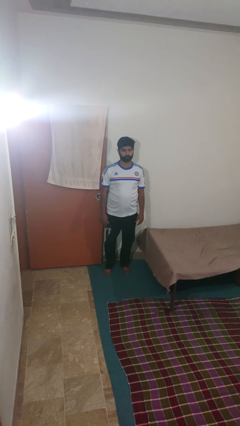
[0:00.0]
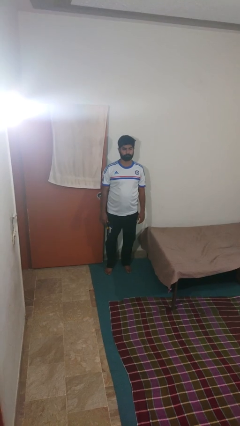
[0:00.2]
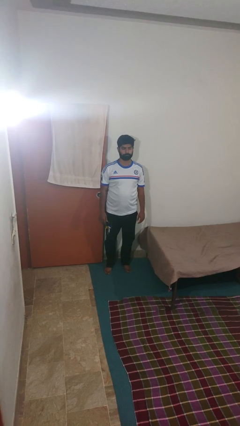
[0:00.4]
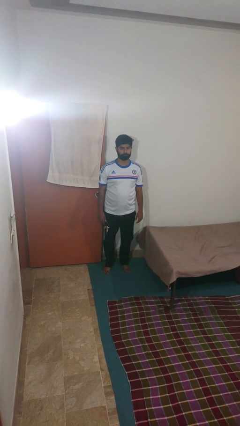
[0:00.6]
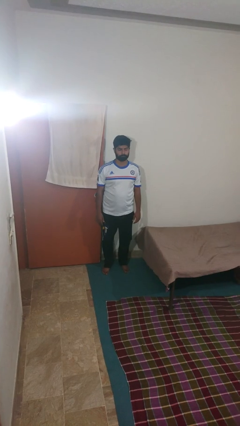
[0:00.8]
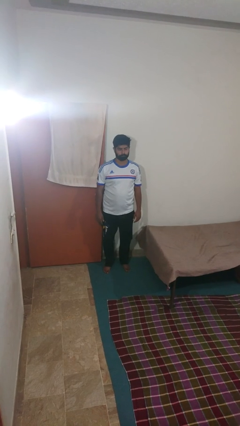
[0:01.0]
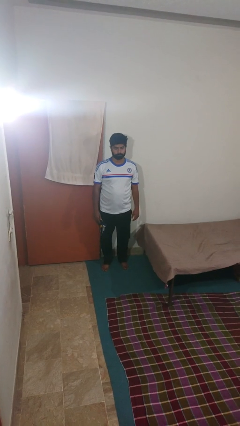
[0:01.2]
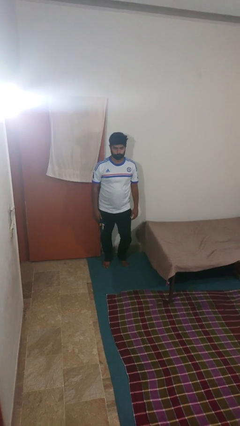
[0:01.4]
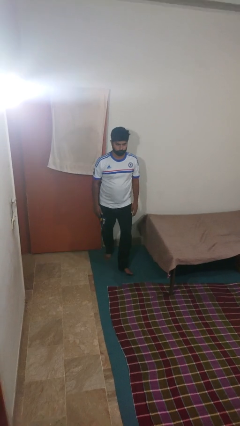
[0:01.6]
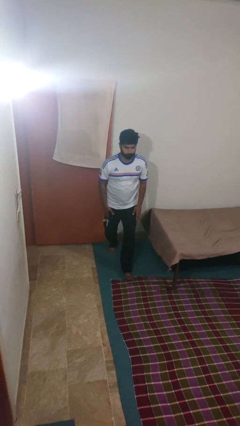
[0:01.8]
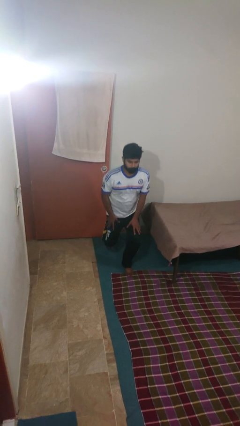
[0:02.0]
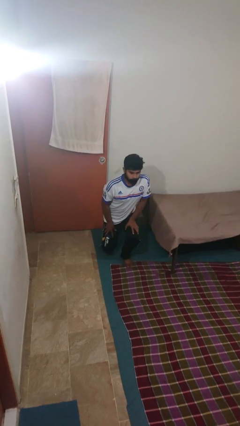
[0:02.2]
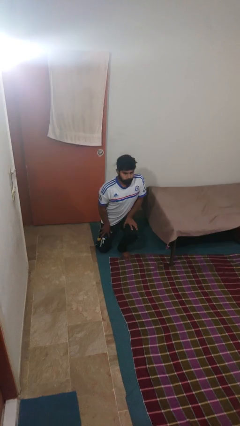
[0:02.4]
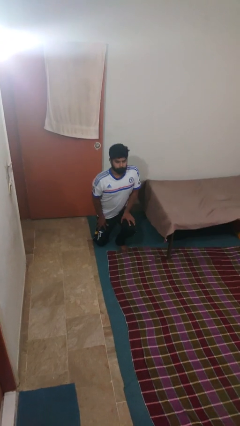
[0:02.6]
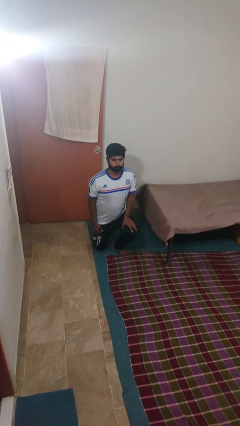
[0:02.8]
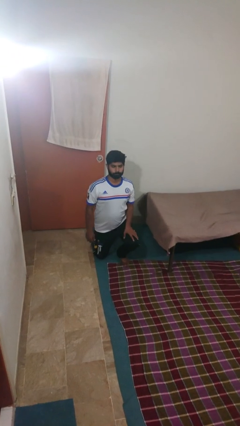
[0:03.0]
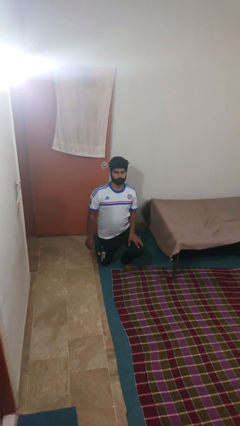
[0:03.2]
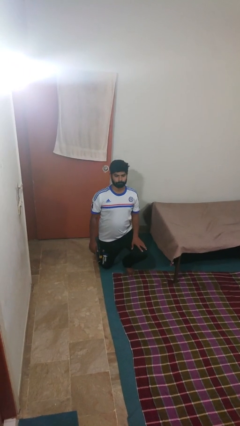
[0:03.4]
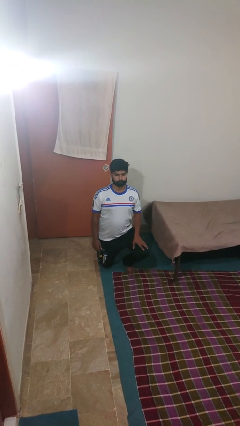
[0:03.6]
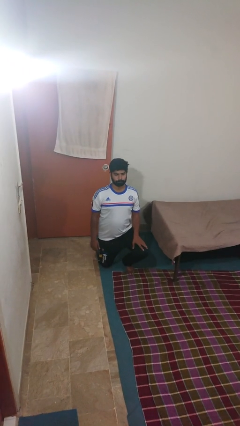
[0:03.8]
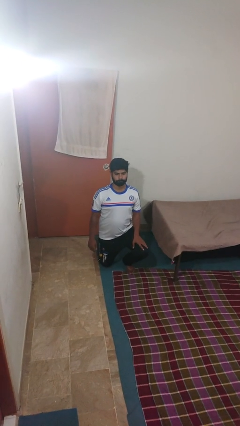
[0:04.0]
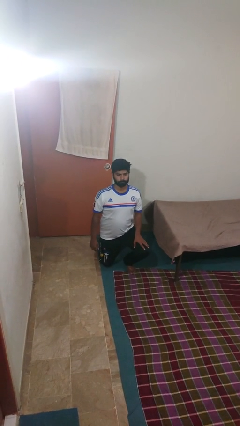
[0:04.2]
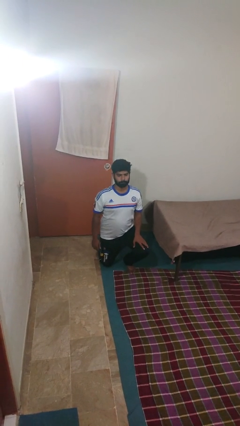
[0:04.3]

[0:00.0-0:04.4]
person kneels

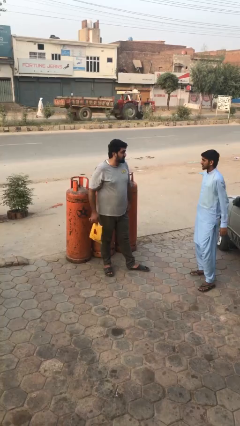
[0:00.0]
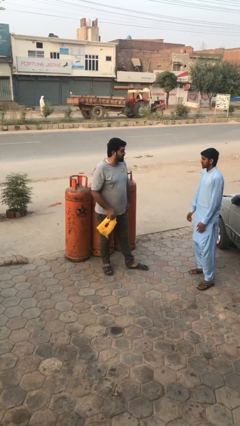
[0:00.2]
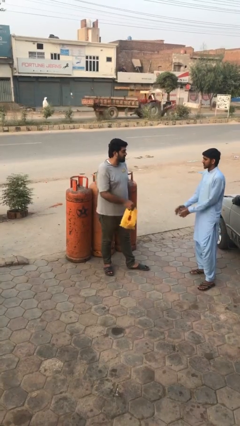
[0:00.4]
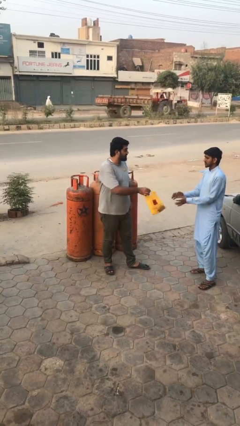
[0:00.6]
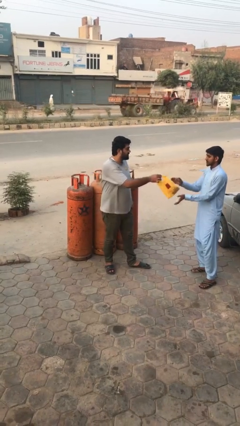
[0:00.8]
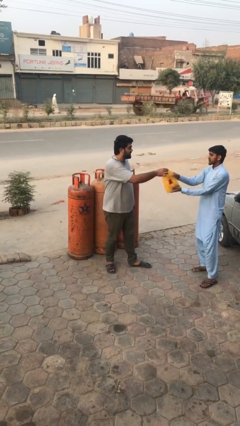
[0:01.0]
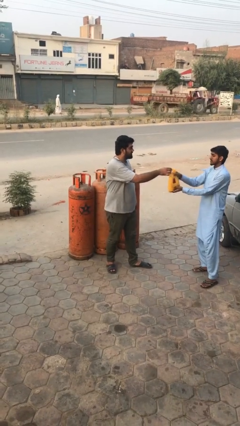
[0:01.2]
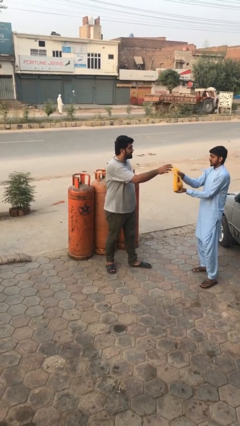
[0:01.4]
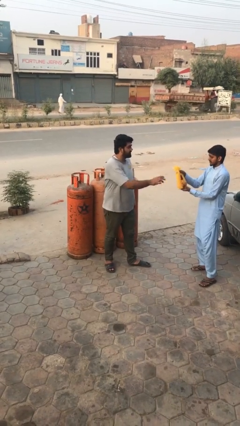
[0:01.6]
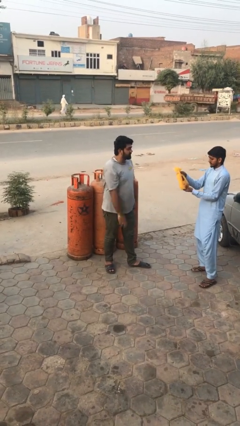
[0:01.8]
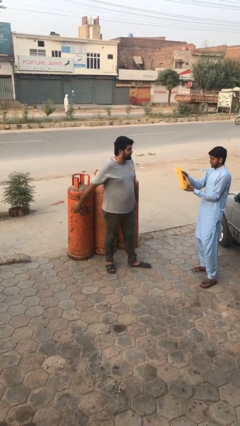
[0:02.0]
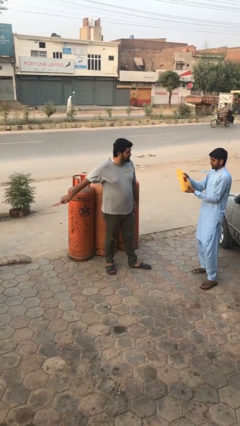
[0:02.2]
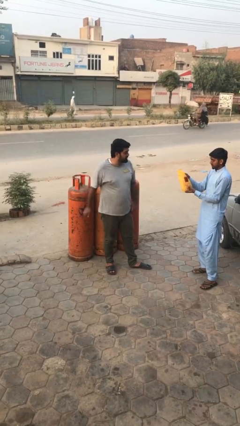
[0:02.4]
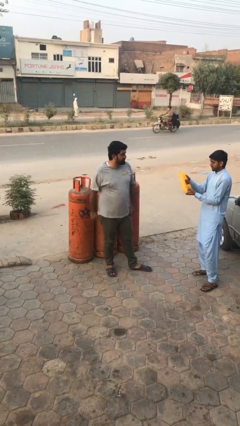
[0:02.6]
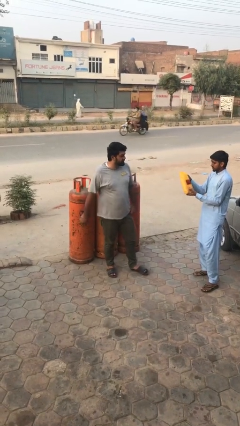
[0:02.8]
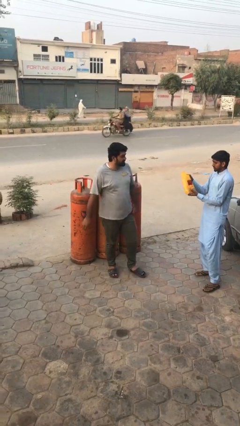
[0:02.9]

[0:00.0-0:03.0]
person transfers object to person

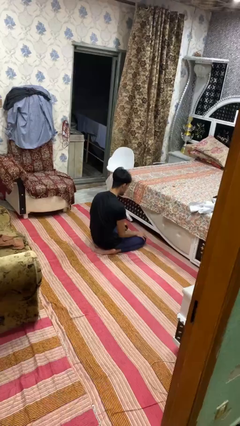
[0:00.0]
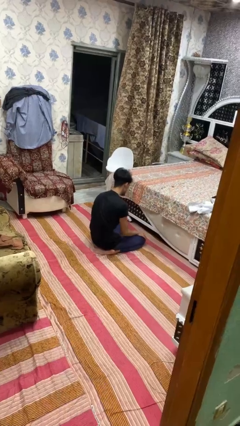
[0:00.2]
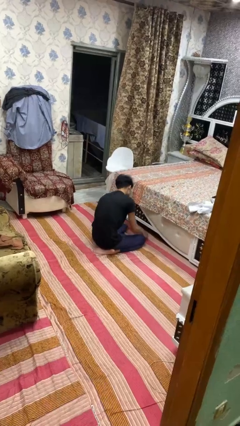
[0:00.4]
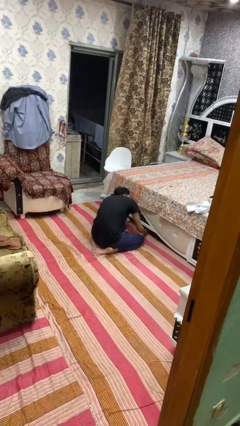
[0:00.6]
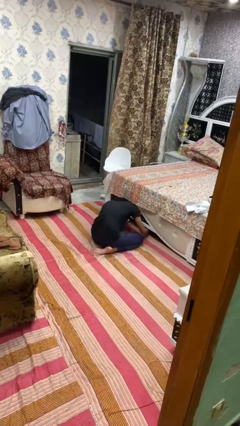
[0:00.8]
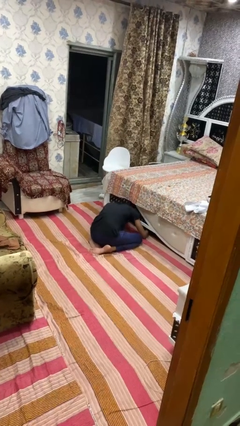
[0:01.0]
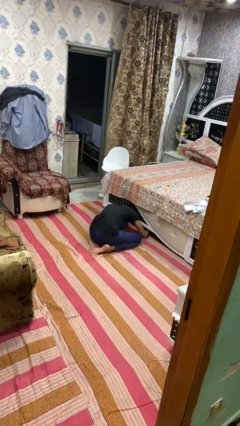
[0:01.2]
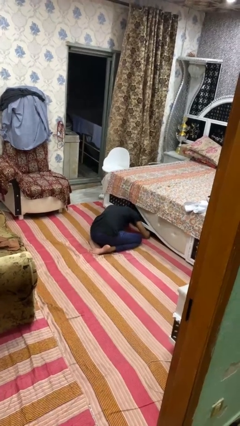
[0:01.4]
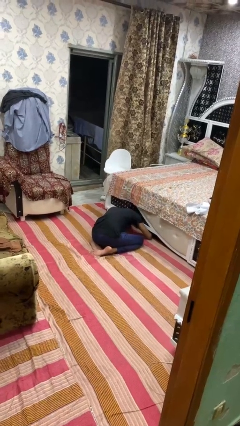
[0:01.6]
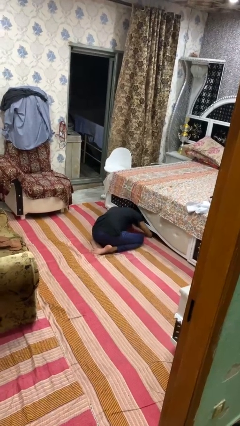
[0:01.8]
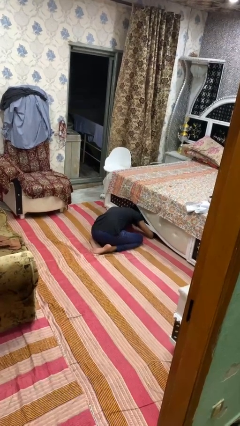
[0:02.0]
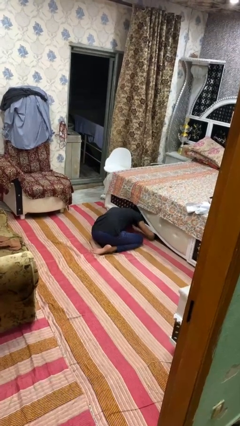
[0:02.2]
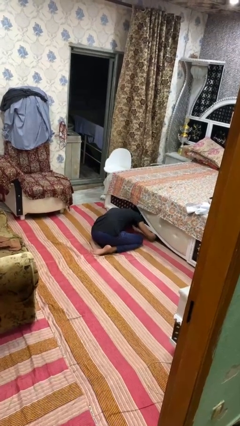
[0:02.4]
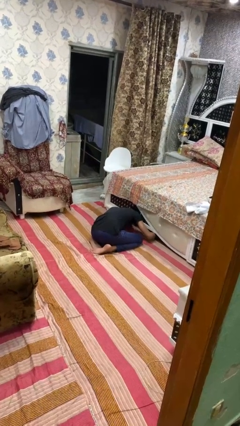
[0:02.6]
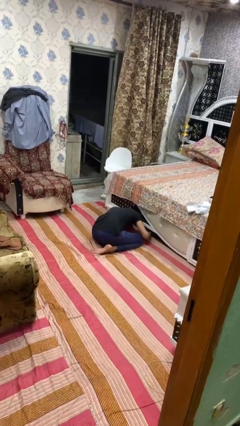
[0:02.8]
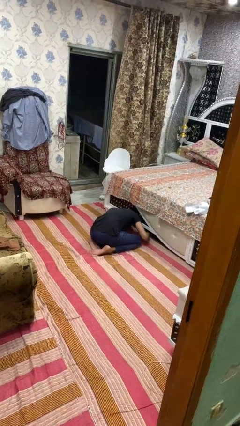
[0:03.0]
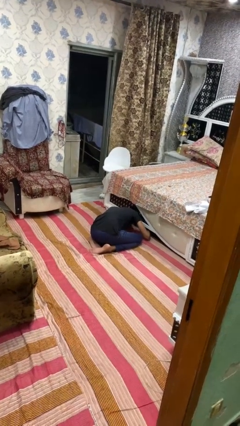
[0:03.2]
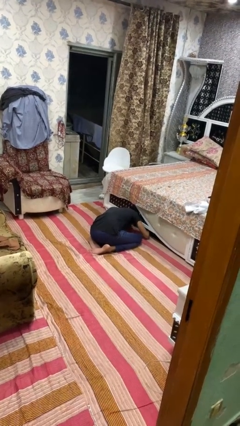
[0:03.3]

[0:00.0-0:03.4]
person searches under bed

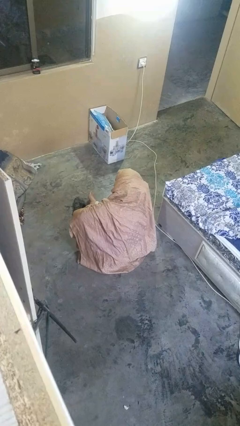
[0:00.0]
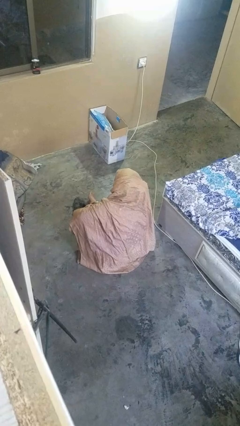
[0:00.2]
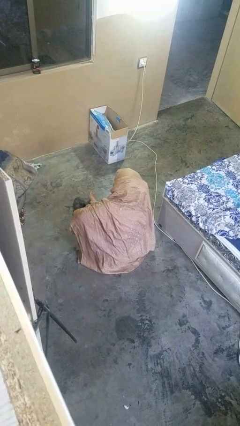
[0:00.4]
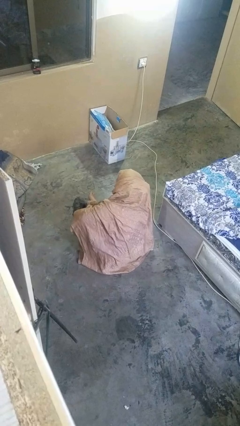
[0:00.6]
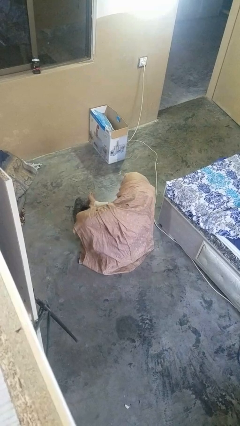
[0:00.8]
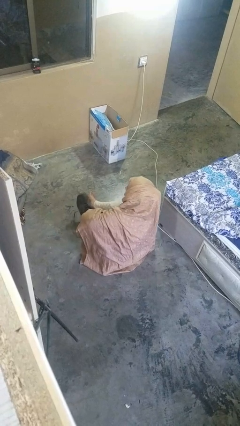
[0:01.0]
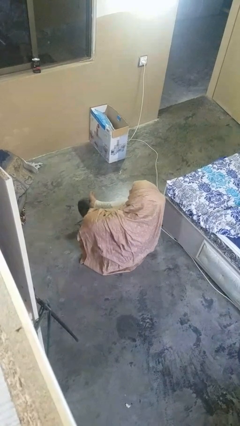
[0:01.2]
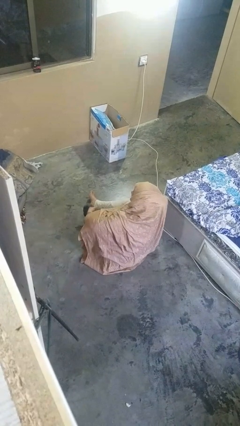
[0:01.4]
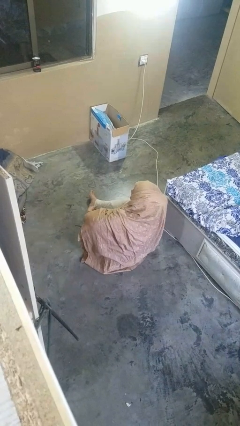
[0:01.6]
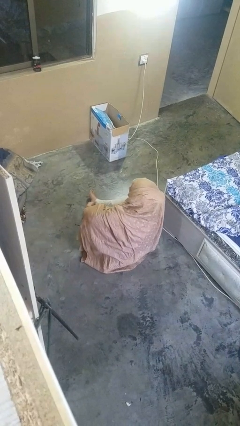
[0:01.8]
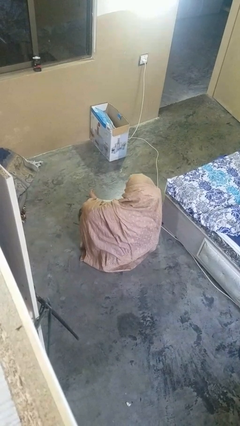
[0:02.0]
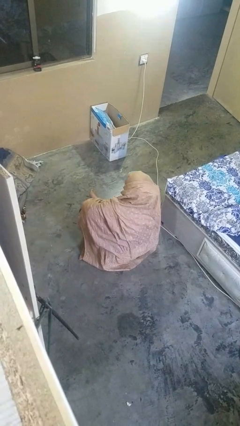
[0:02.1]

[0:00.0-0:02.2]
person puts on shoes

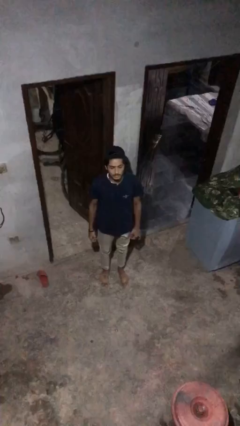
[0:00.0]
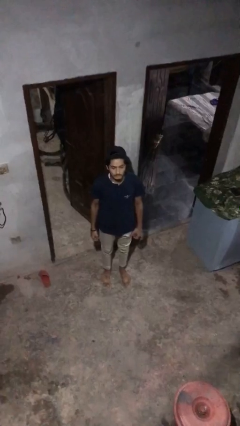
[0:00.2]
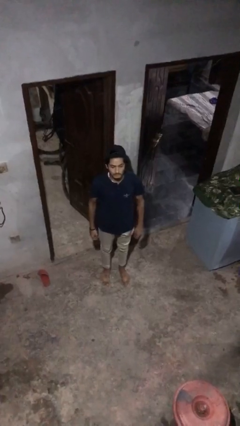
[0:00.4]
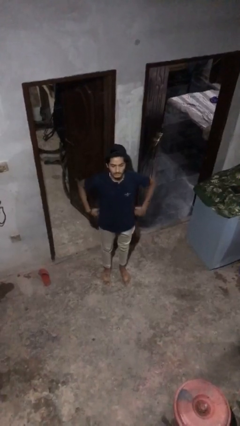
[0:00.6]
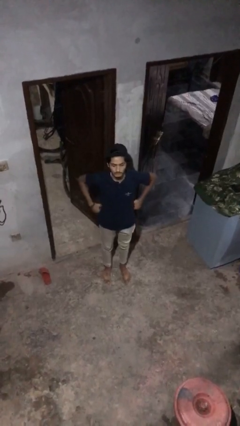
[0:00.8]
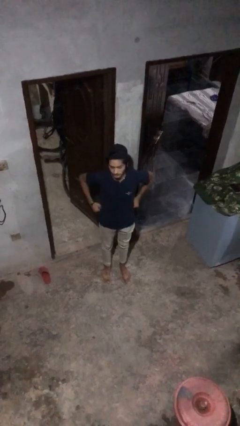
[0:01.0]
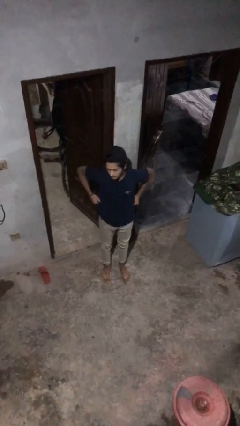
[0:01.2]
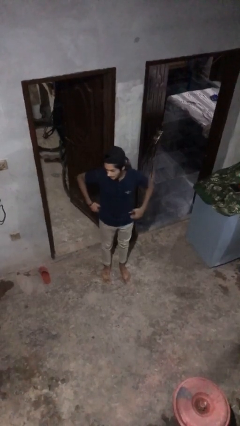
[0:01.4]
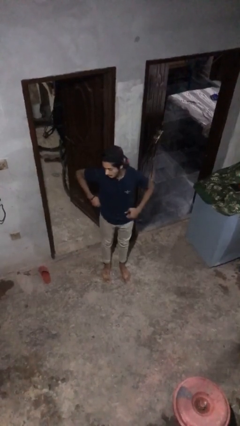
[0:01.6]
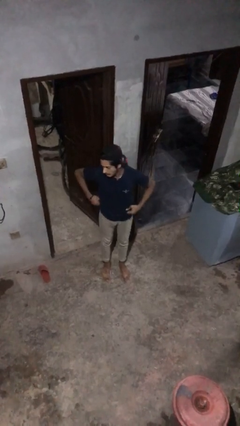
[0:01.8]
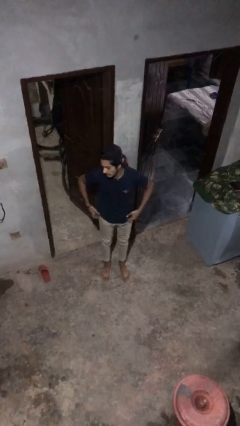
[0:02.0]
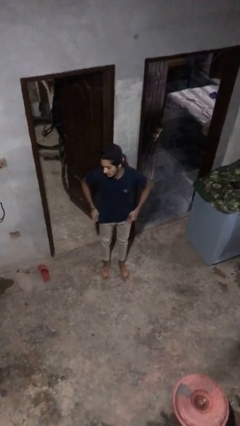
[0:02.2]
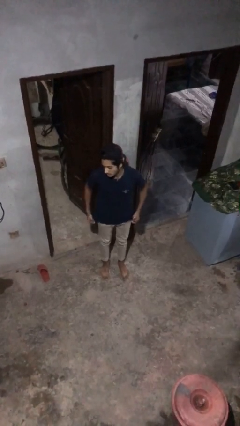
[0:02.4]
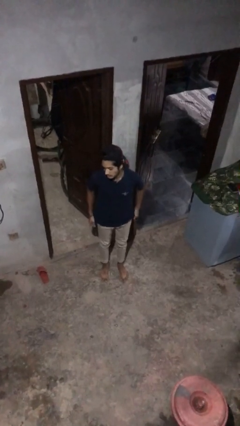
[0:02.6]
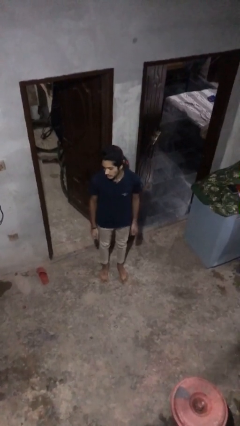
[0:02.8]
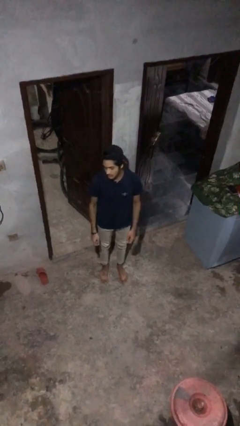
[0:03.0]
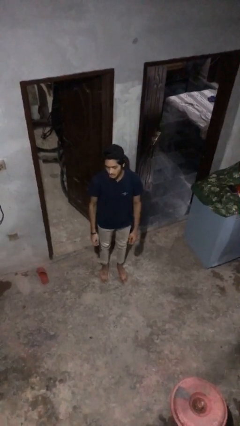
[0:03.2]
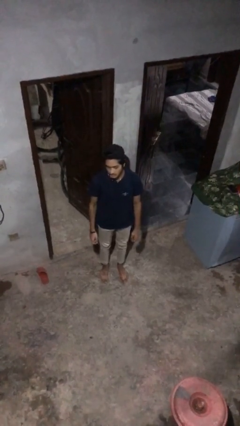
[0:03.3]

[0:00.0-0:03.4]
person hikes up pants

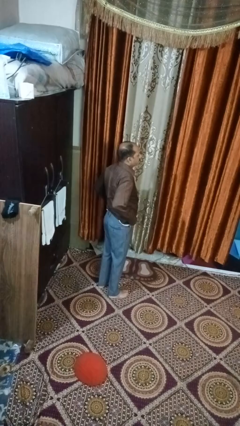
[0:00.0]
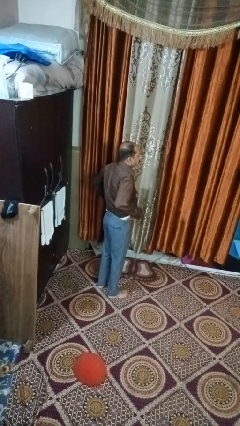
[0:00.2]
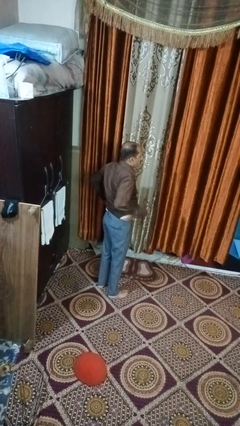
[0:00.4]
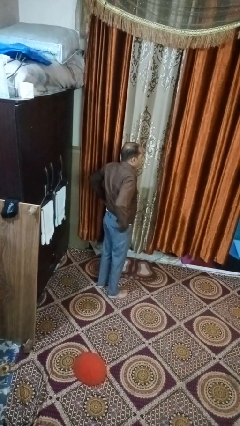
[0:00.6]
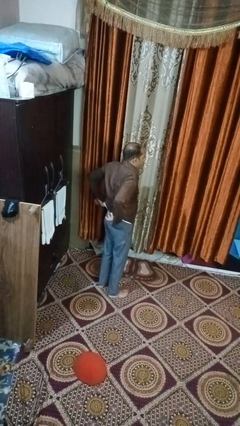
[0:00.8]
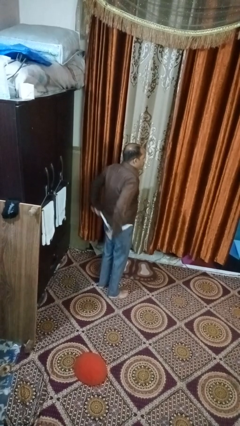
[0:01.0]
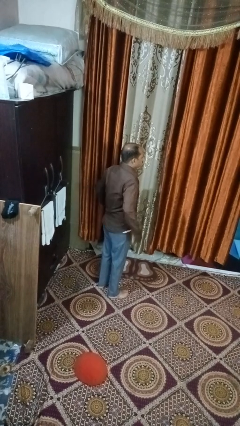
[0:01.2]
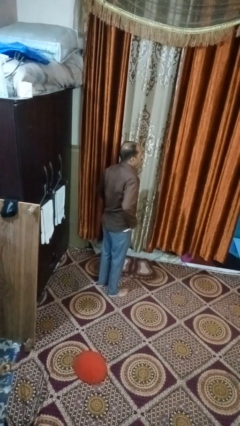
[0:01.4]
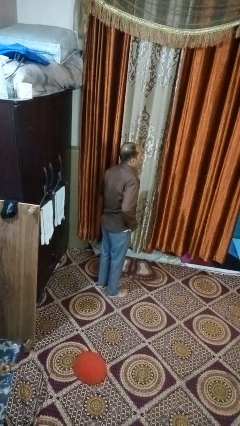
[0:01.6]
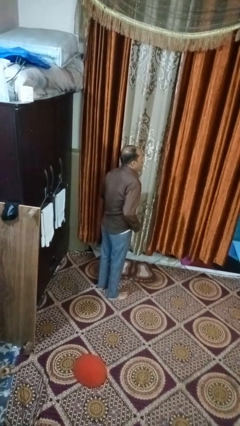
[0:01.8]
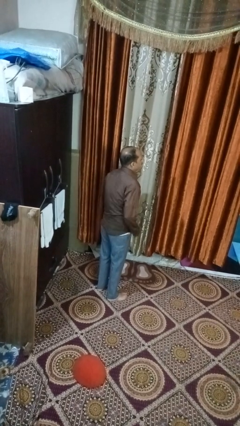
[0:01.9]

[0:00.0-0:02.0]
person untucks shirt
